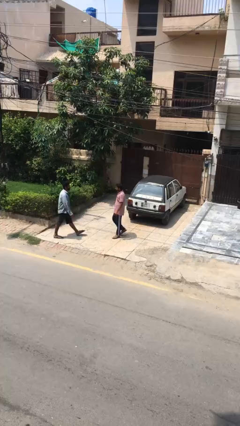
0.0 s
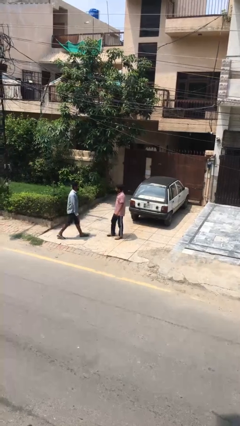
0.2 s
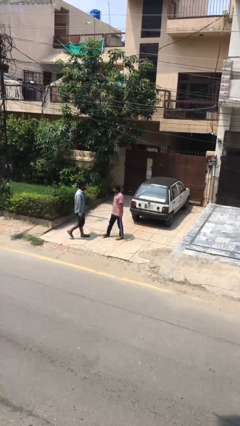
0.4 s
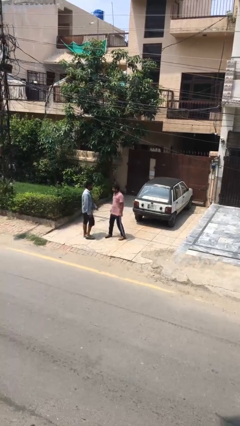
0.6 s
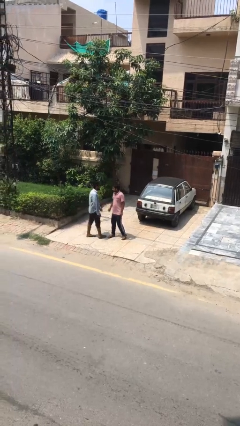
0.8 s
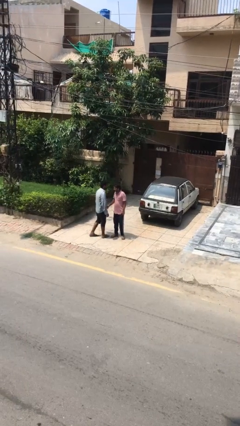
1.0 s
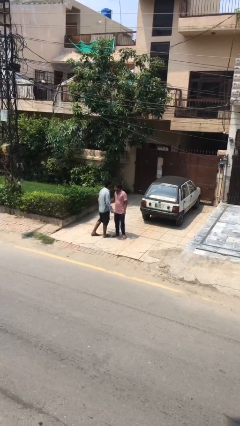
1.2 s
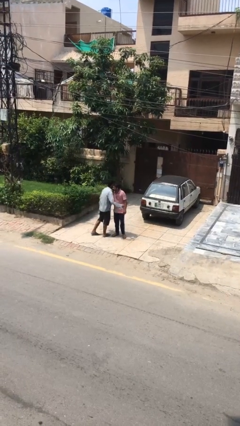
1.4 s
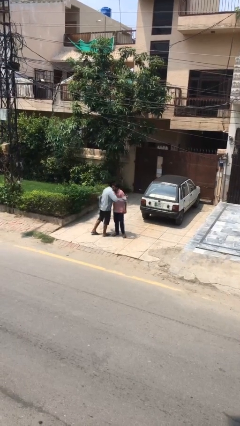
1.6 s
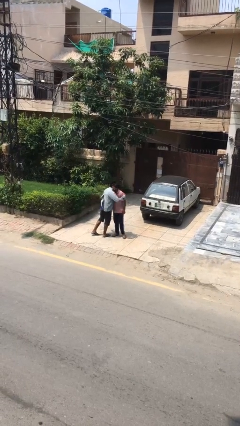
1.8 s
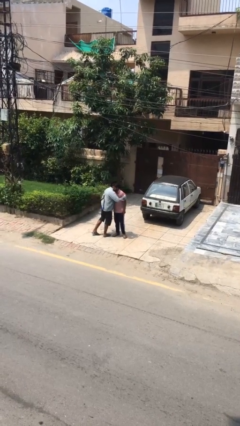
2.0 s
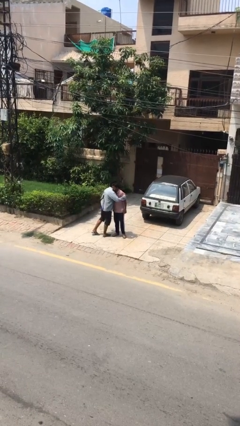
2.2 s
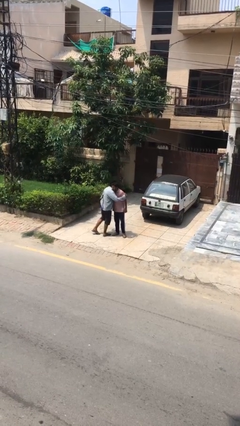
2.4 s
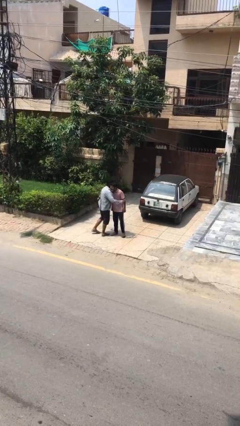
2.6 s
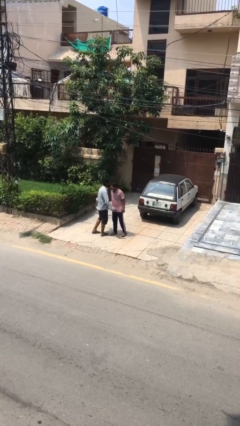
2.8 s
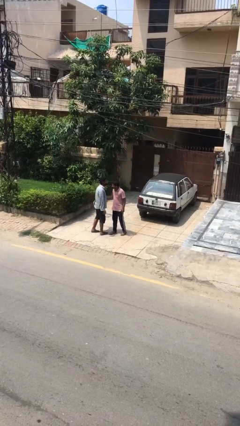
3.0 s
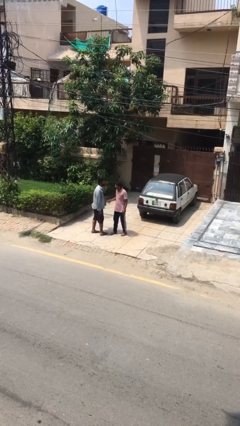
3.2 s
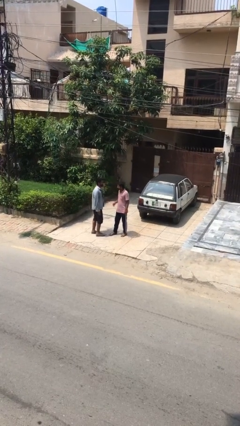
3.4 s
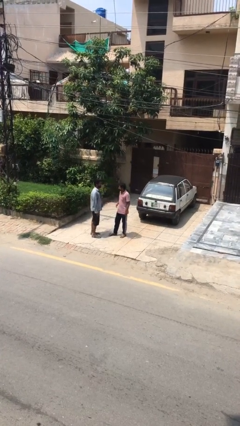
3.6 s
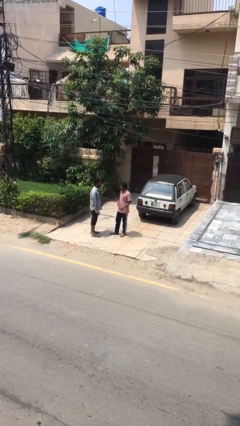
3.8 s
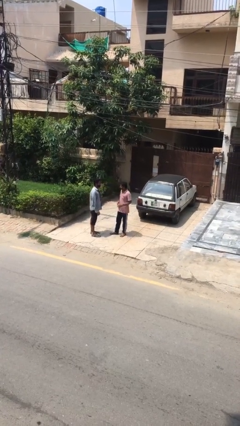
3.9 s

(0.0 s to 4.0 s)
person embraces person

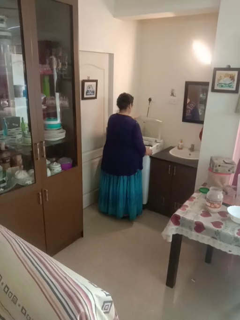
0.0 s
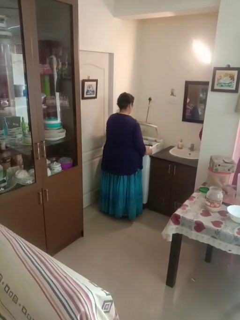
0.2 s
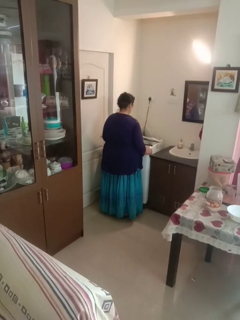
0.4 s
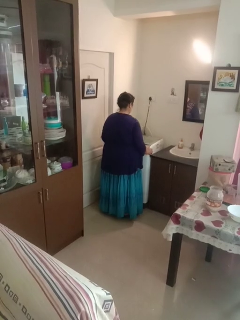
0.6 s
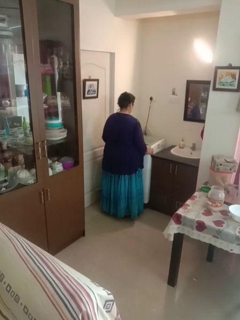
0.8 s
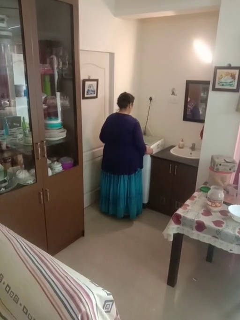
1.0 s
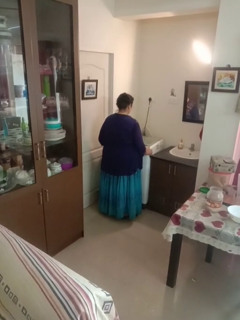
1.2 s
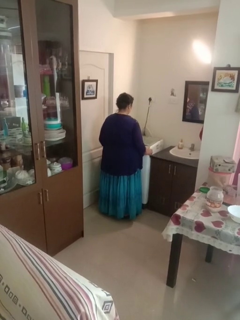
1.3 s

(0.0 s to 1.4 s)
person closes clothes washer

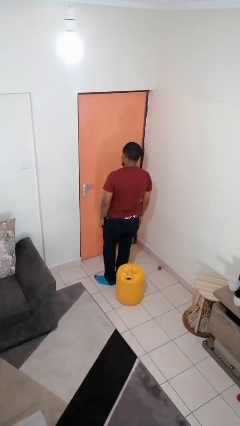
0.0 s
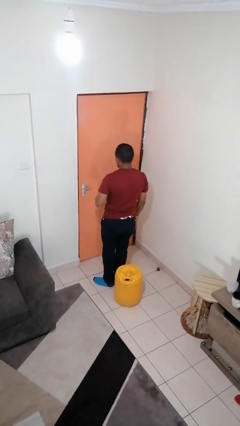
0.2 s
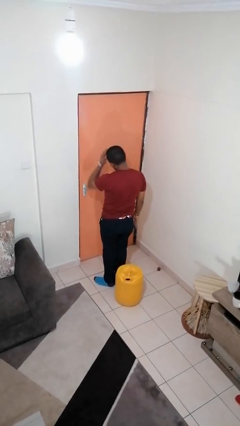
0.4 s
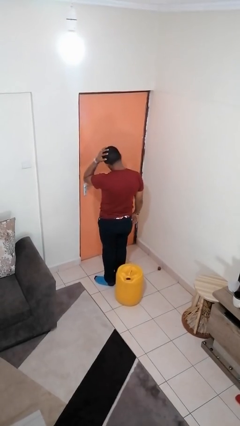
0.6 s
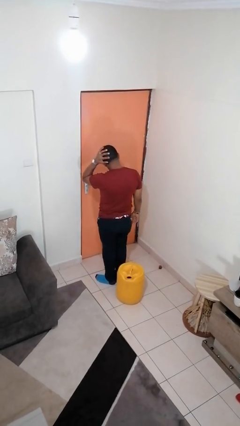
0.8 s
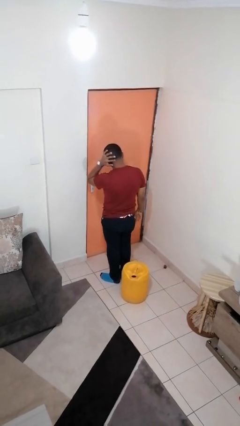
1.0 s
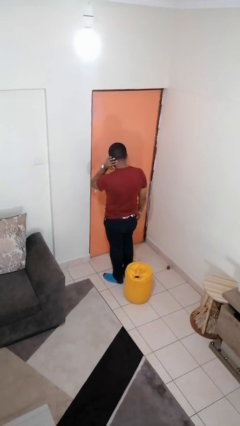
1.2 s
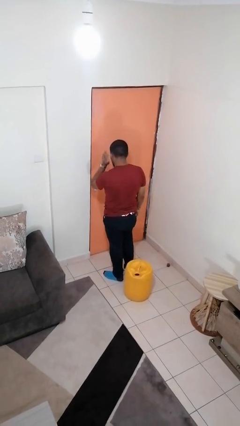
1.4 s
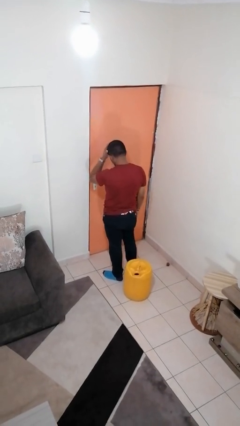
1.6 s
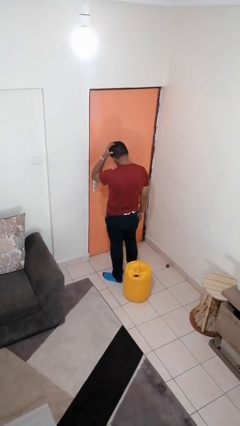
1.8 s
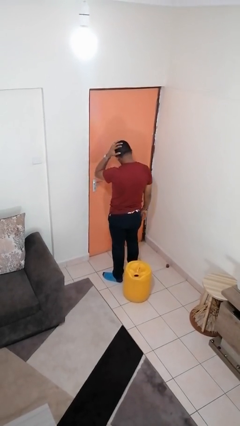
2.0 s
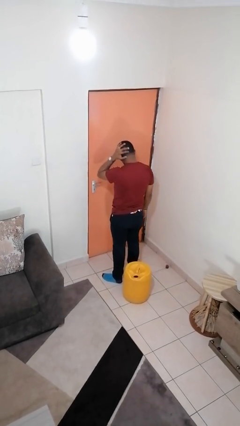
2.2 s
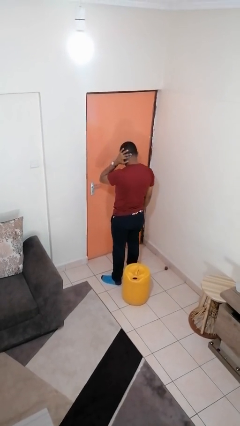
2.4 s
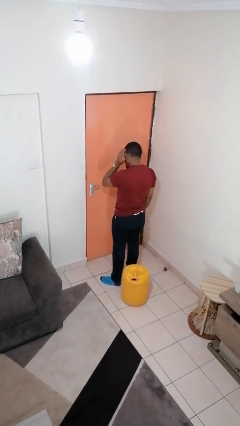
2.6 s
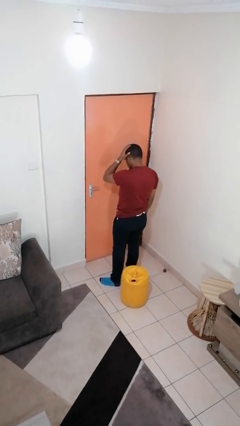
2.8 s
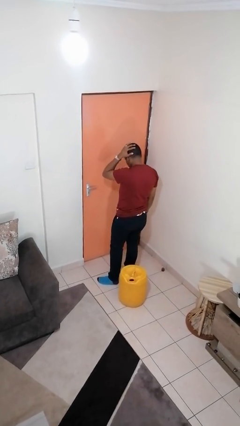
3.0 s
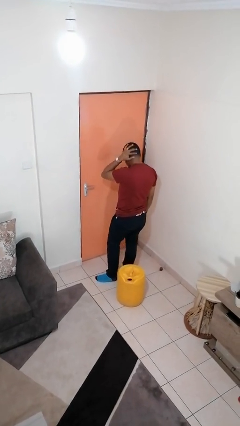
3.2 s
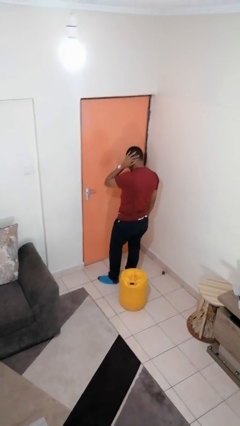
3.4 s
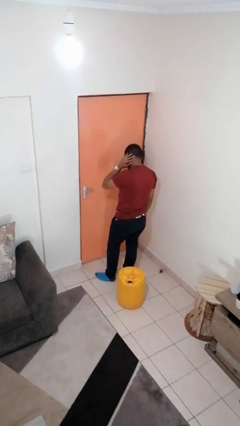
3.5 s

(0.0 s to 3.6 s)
person strokes hair

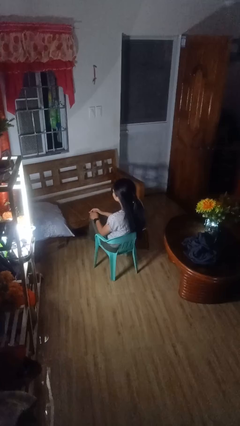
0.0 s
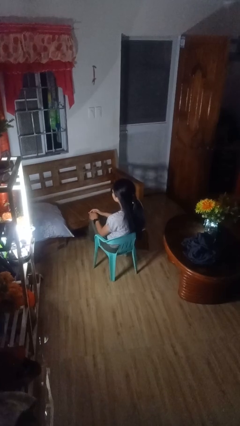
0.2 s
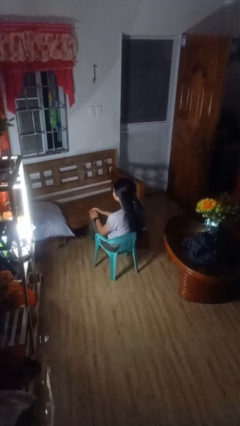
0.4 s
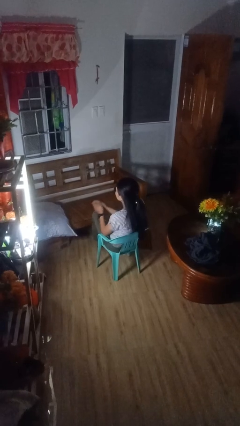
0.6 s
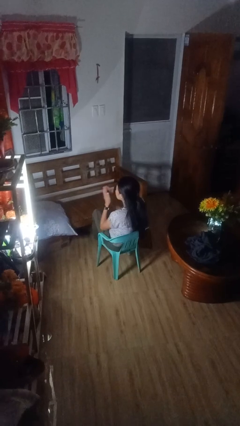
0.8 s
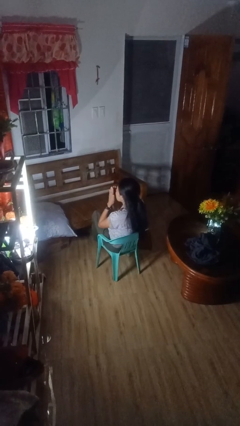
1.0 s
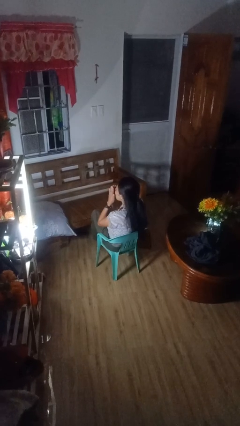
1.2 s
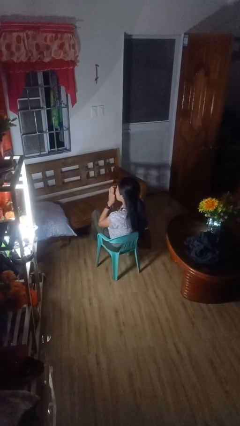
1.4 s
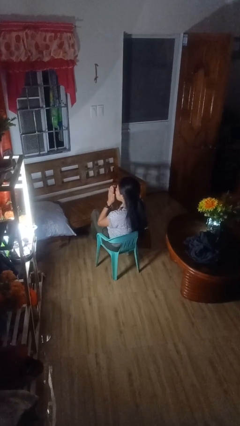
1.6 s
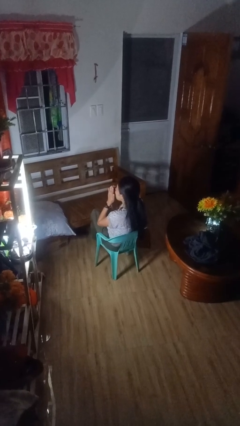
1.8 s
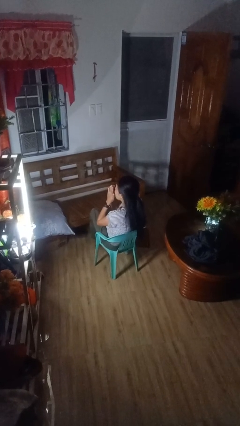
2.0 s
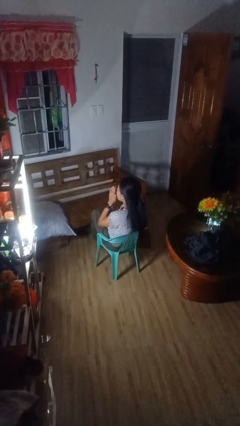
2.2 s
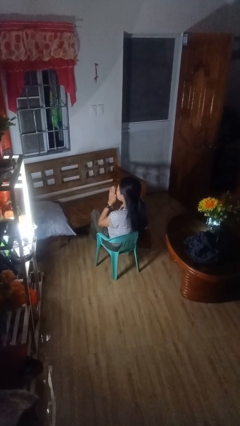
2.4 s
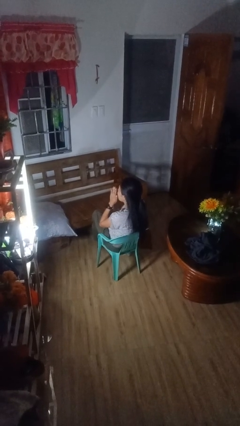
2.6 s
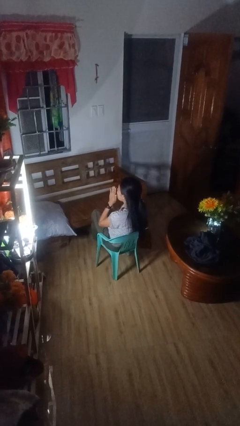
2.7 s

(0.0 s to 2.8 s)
person blows into hands

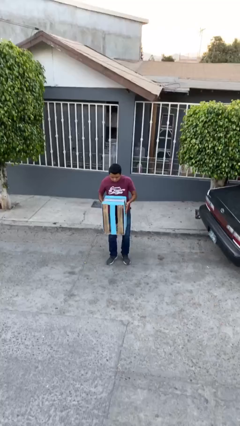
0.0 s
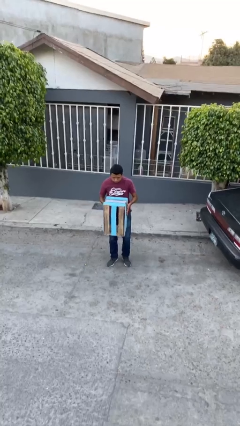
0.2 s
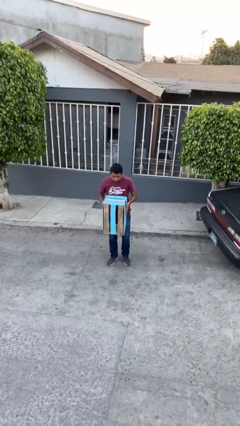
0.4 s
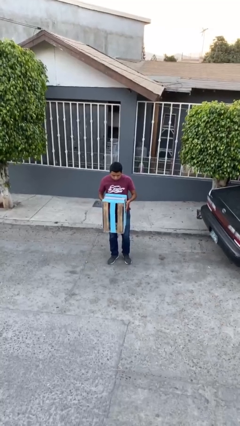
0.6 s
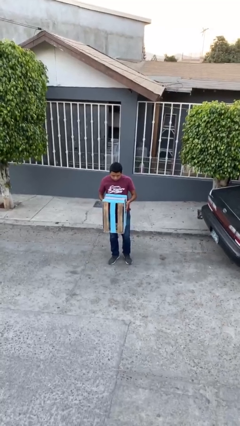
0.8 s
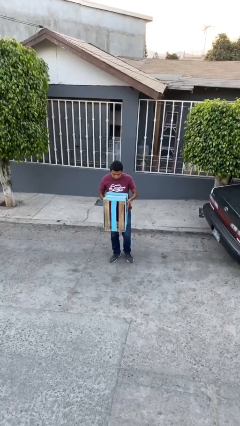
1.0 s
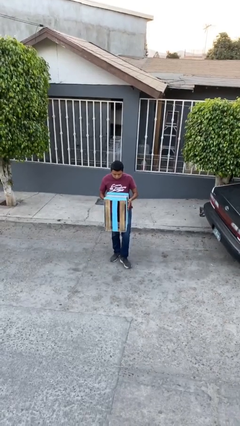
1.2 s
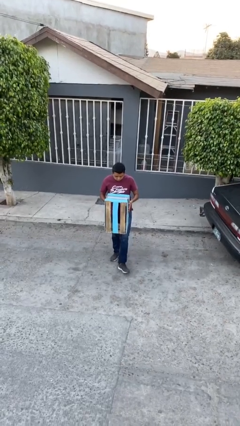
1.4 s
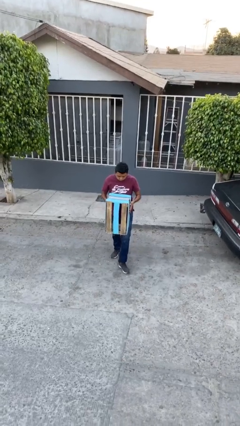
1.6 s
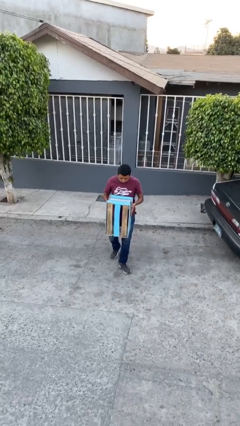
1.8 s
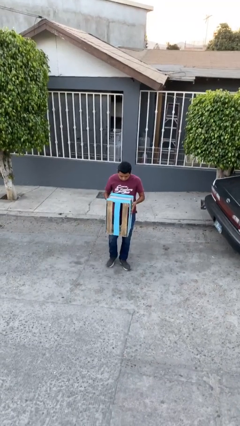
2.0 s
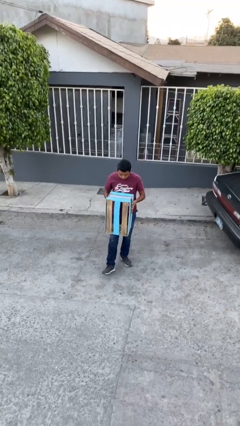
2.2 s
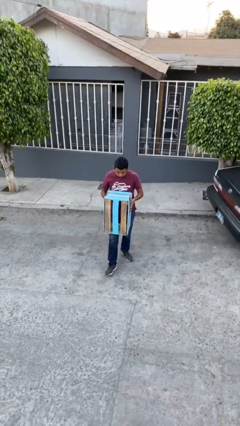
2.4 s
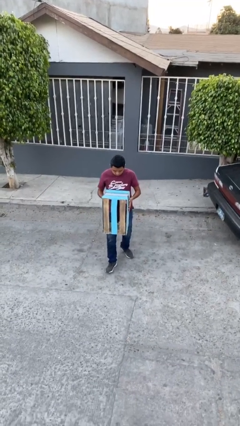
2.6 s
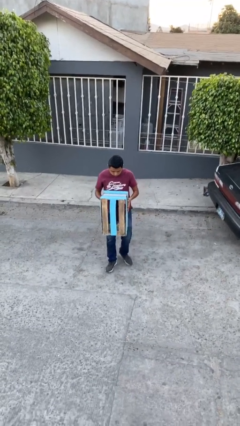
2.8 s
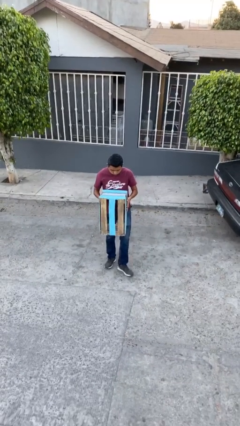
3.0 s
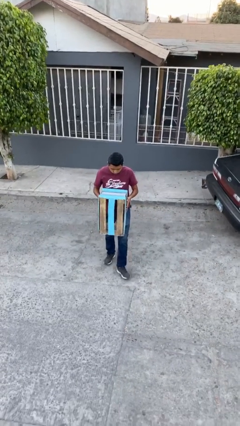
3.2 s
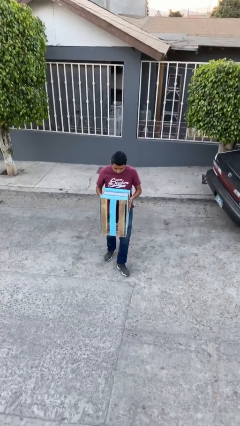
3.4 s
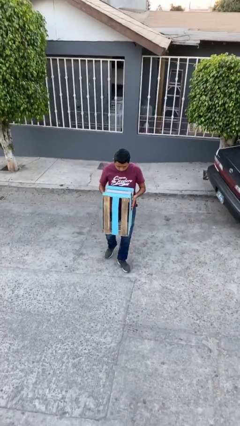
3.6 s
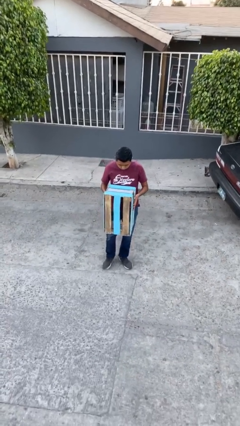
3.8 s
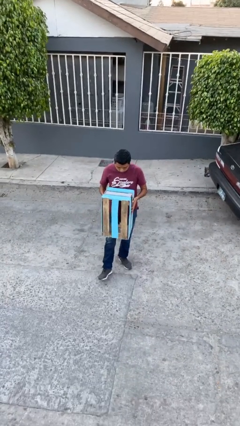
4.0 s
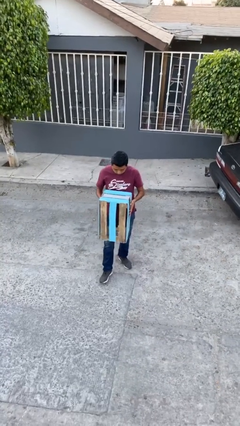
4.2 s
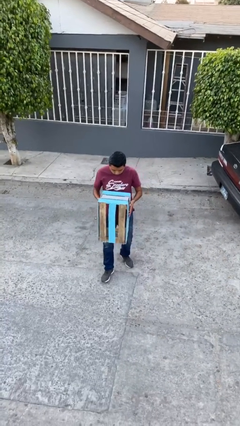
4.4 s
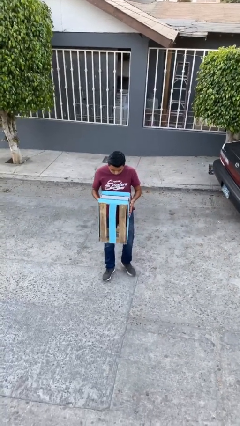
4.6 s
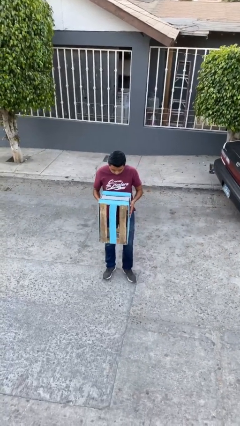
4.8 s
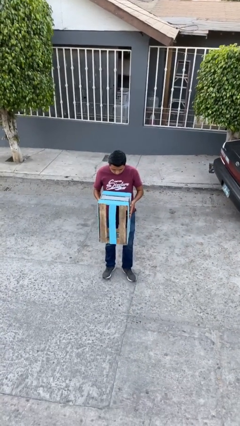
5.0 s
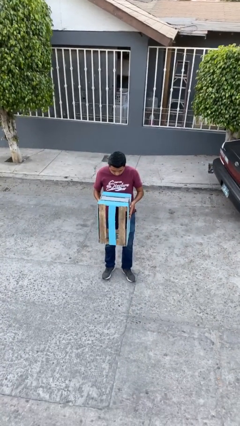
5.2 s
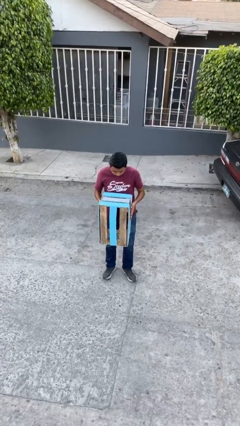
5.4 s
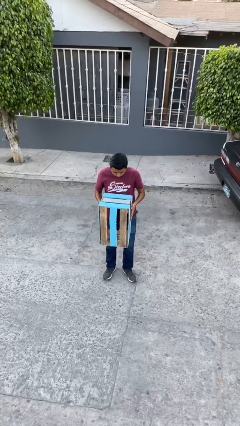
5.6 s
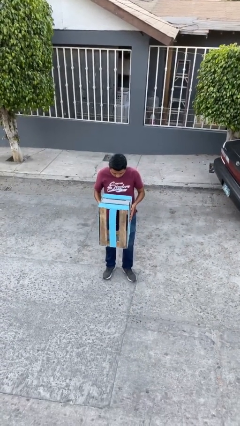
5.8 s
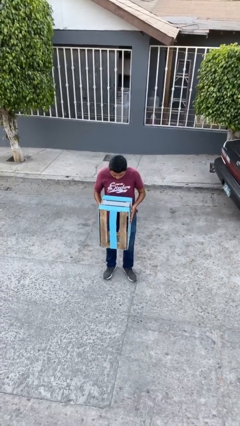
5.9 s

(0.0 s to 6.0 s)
person carries heavy object

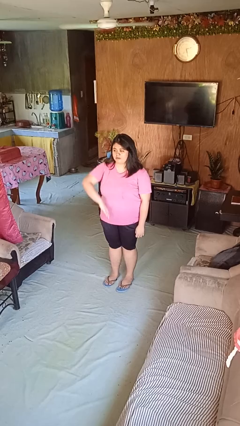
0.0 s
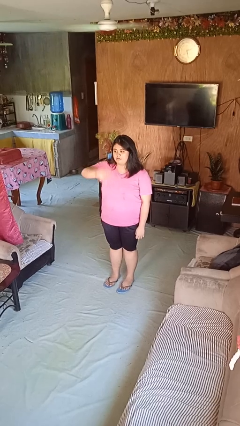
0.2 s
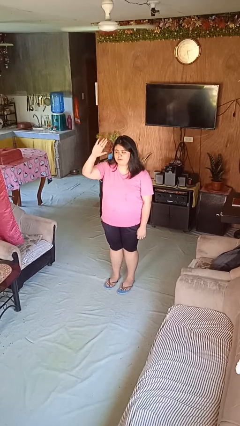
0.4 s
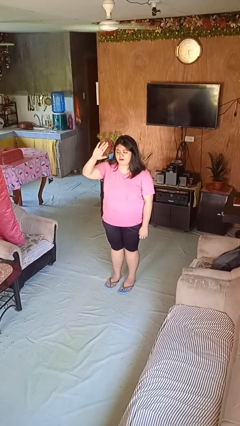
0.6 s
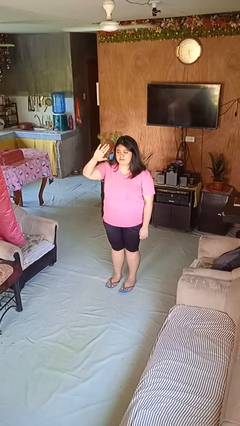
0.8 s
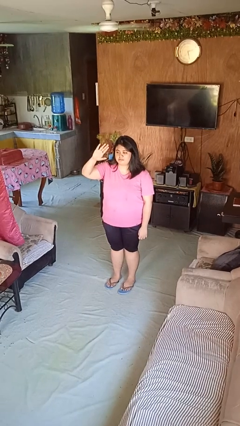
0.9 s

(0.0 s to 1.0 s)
person gestures swipe up
